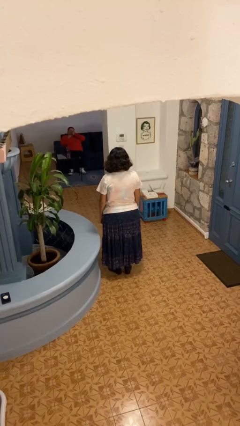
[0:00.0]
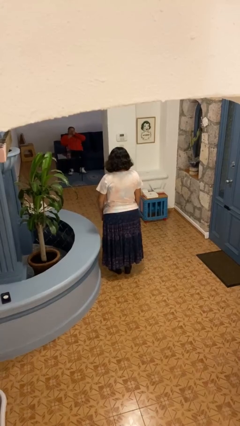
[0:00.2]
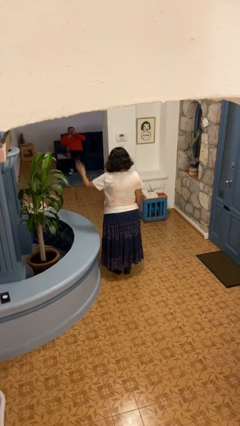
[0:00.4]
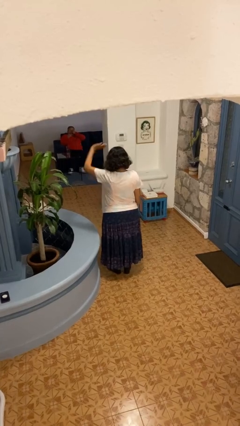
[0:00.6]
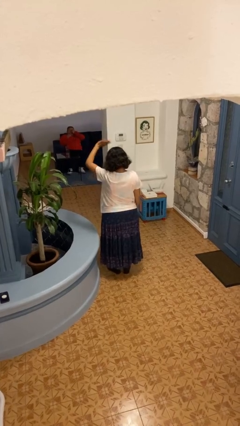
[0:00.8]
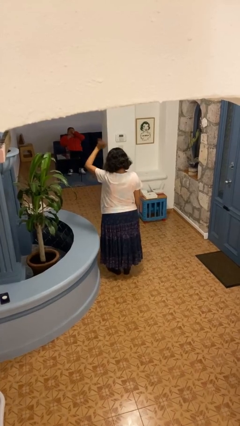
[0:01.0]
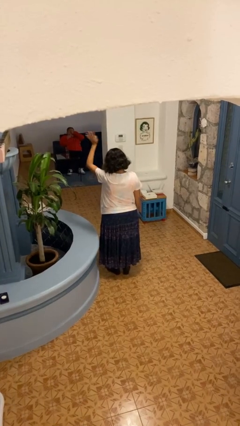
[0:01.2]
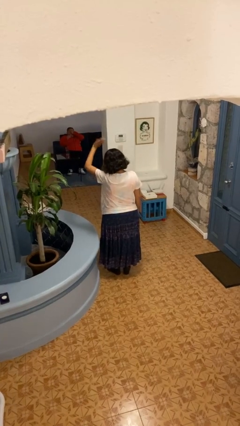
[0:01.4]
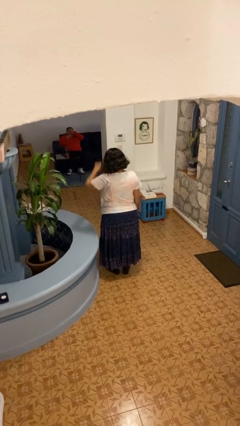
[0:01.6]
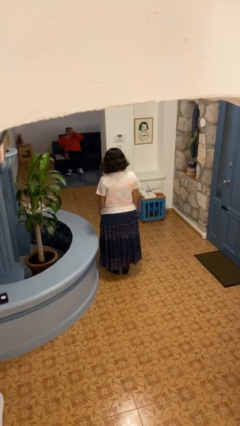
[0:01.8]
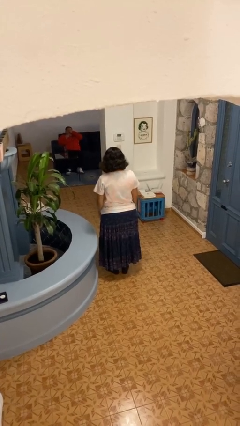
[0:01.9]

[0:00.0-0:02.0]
person waves at person

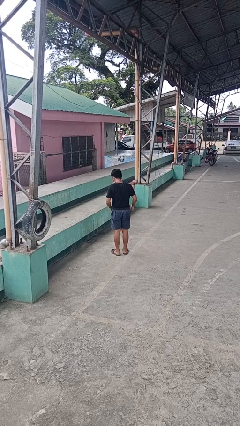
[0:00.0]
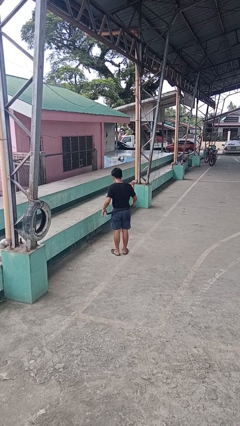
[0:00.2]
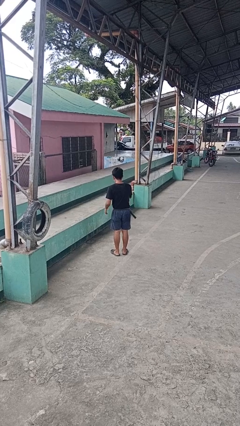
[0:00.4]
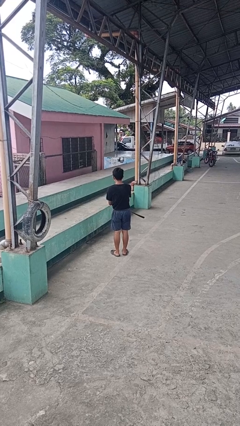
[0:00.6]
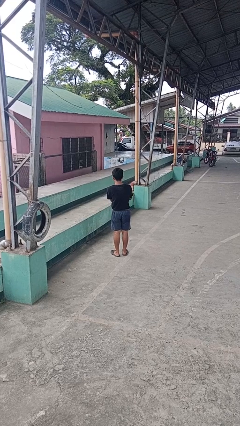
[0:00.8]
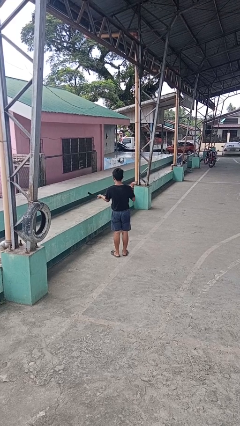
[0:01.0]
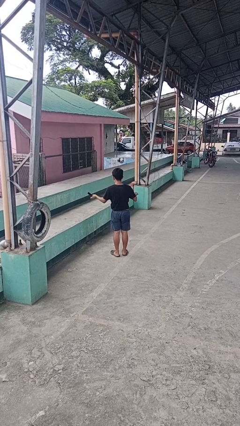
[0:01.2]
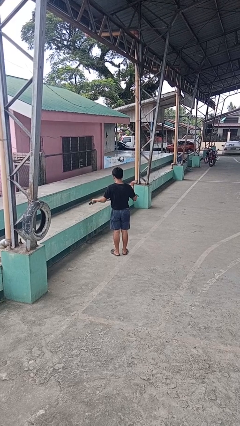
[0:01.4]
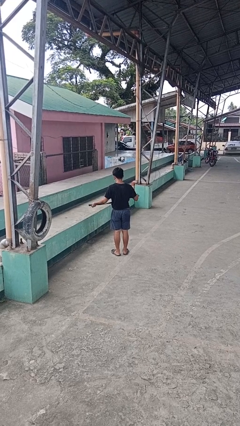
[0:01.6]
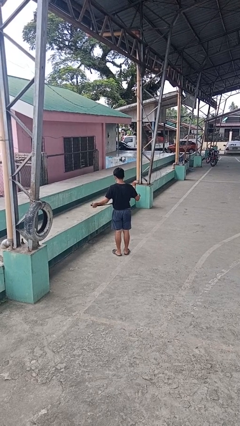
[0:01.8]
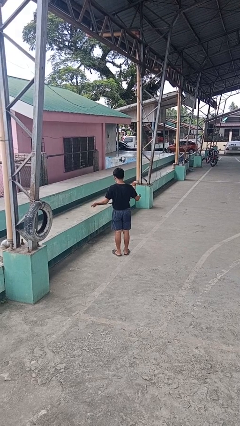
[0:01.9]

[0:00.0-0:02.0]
person takes off belt

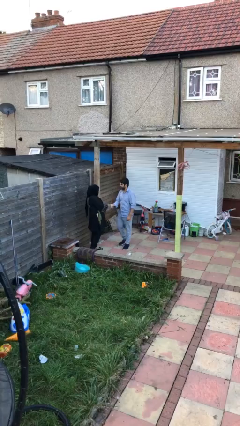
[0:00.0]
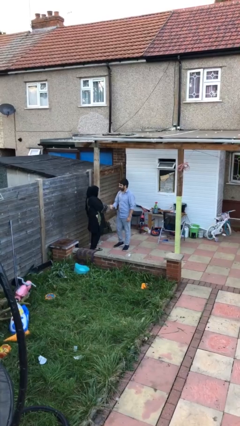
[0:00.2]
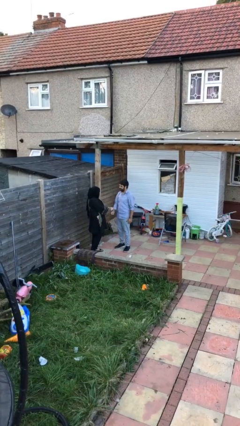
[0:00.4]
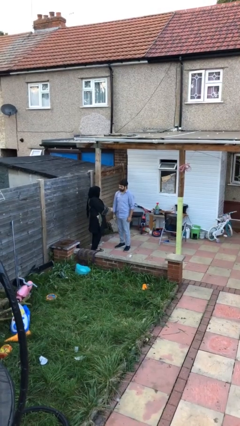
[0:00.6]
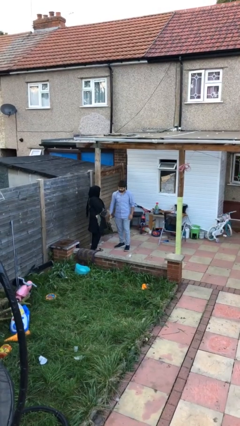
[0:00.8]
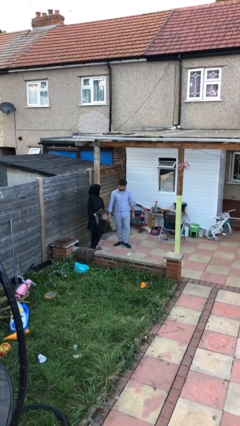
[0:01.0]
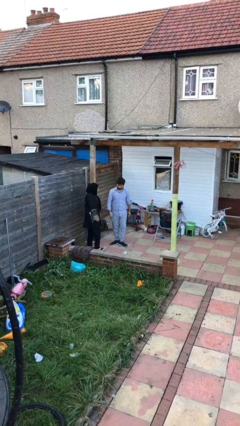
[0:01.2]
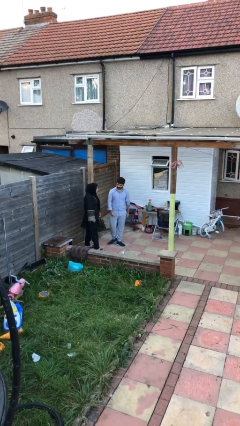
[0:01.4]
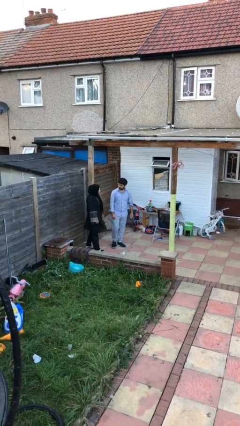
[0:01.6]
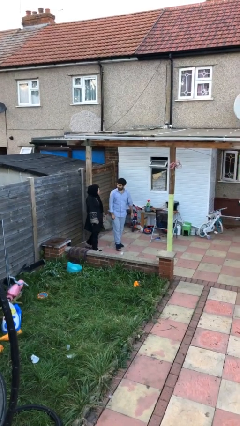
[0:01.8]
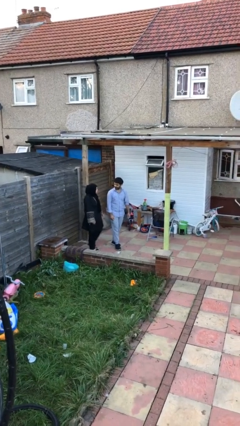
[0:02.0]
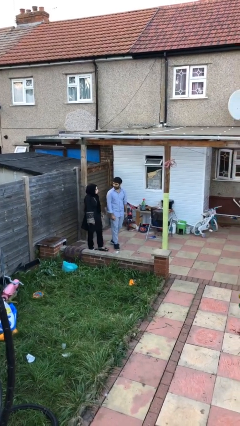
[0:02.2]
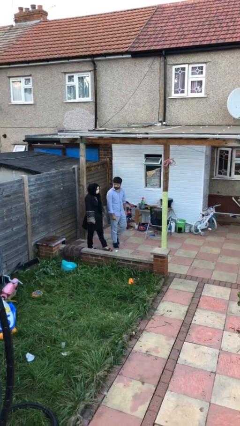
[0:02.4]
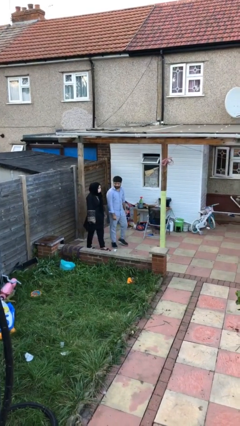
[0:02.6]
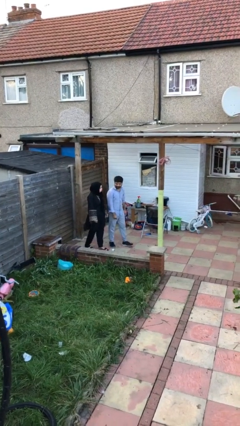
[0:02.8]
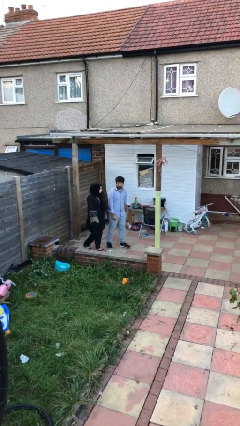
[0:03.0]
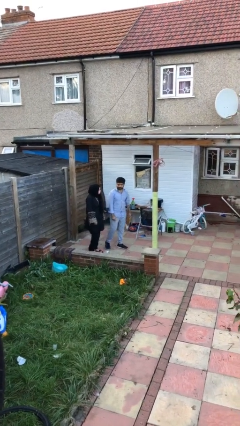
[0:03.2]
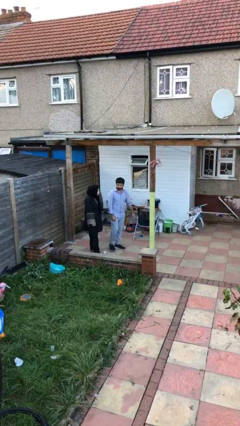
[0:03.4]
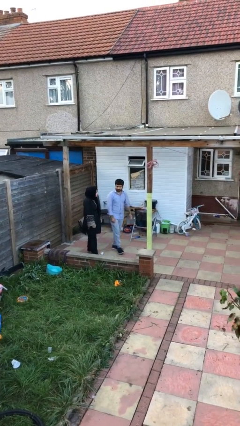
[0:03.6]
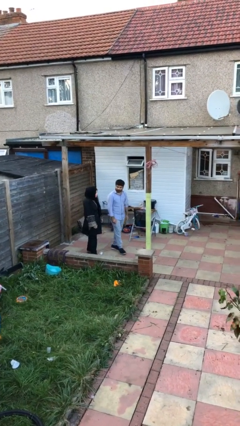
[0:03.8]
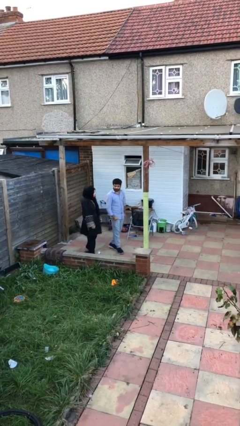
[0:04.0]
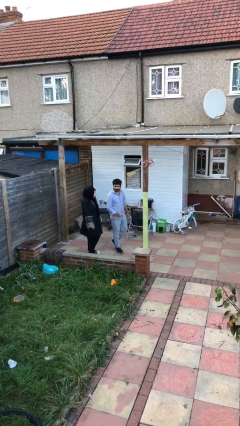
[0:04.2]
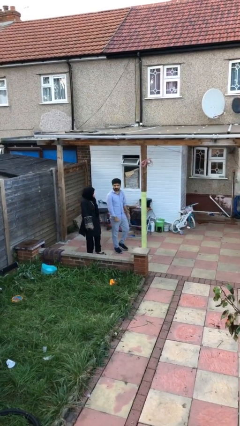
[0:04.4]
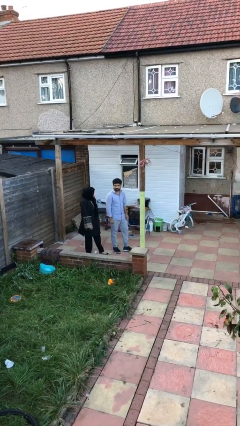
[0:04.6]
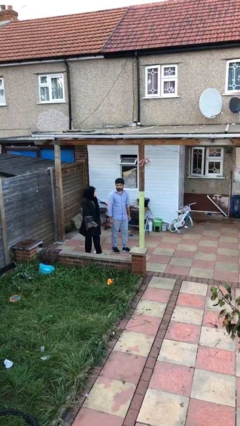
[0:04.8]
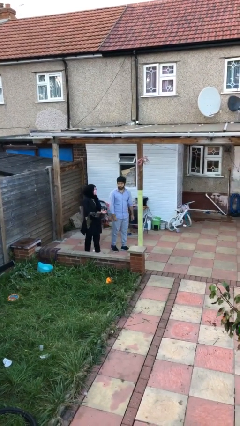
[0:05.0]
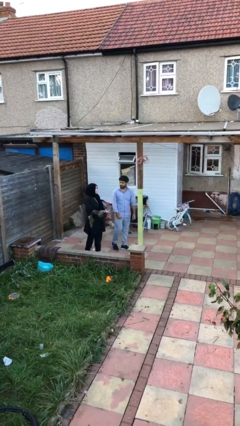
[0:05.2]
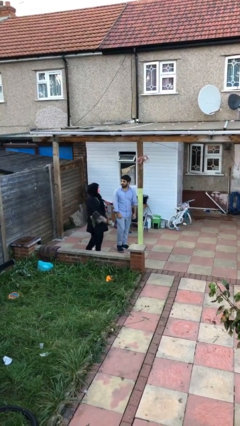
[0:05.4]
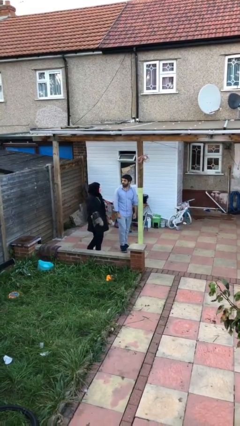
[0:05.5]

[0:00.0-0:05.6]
person talks to person

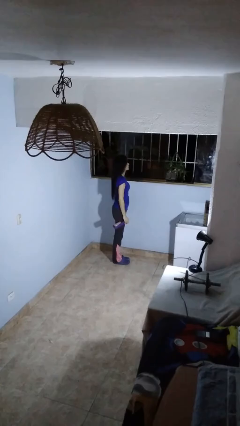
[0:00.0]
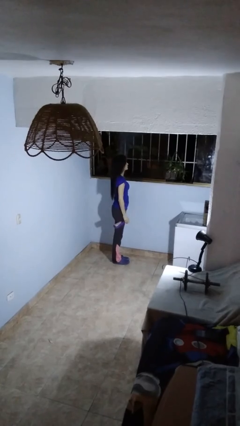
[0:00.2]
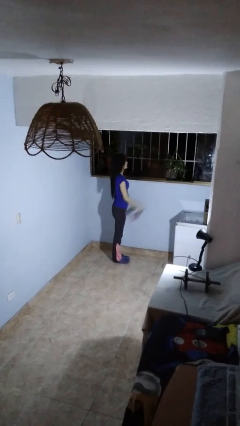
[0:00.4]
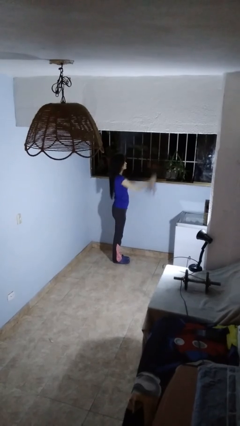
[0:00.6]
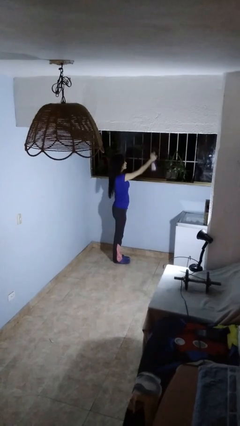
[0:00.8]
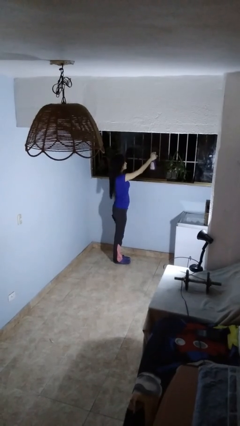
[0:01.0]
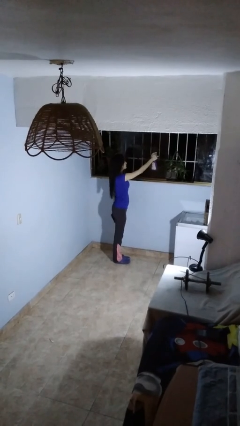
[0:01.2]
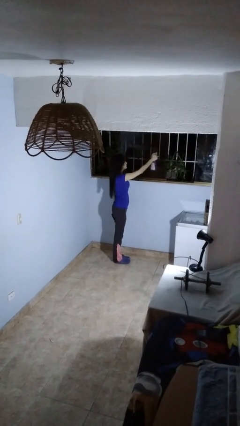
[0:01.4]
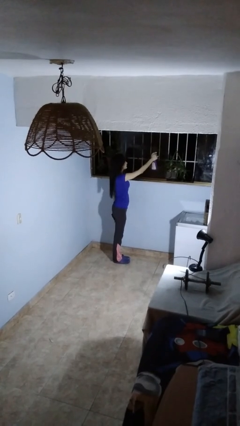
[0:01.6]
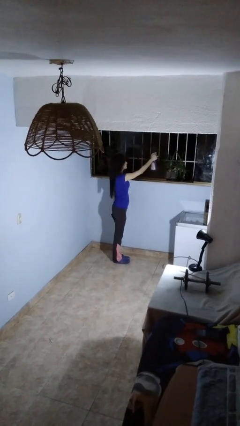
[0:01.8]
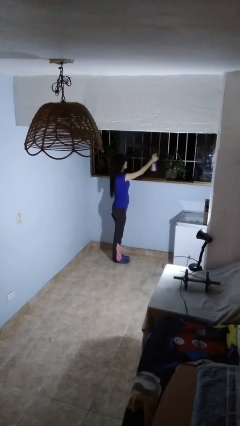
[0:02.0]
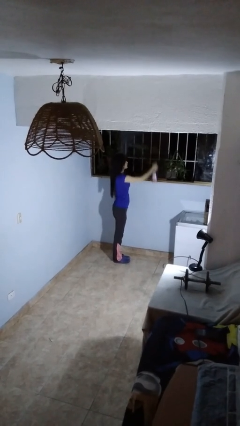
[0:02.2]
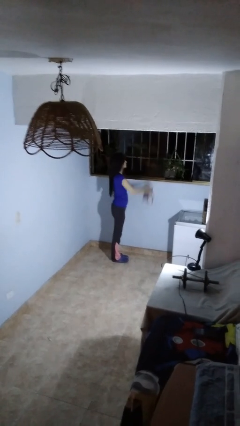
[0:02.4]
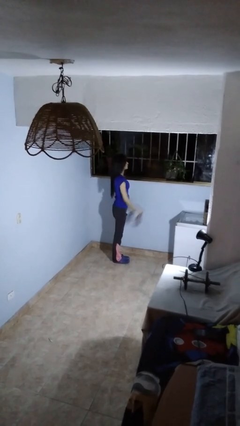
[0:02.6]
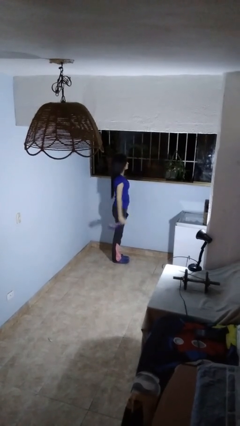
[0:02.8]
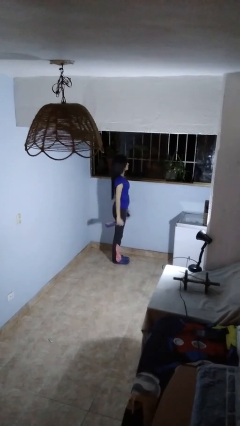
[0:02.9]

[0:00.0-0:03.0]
person sprays from bottle

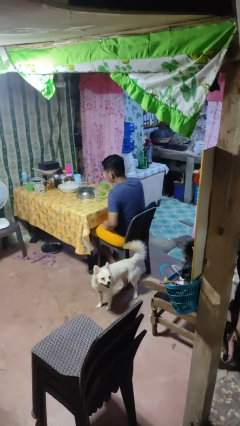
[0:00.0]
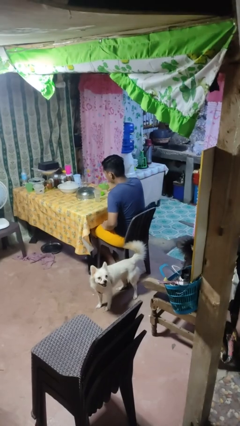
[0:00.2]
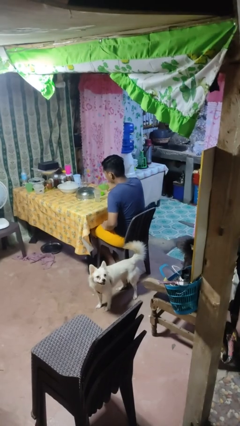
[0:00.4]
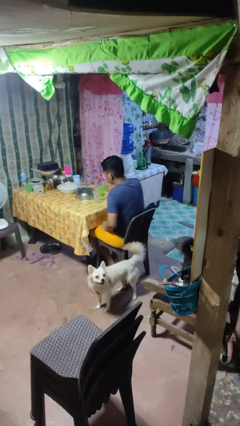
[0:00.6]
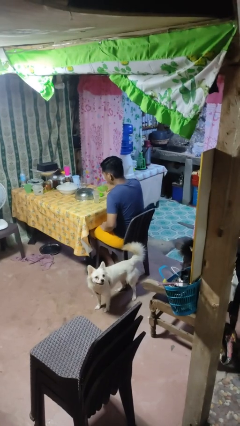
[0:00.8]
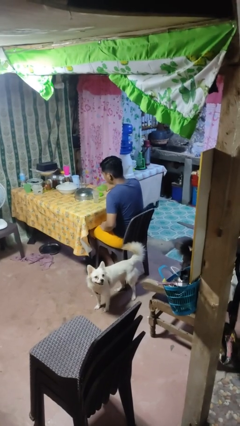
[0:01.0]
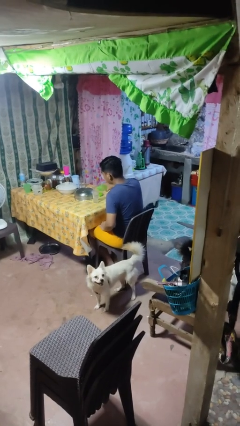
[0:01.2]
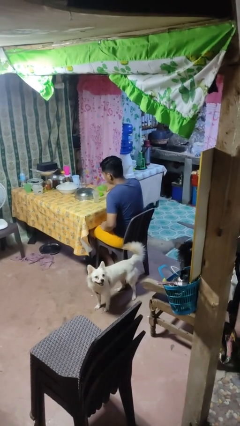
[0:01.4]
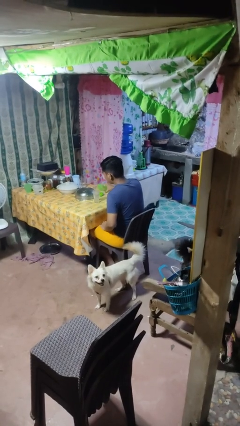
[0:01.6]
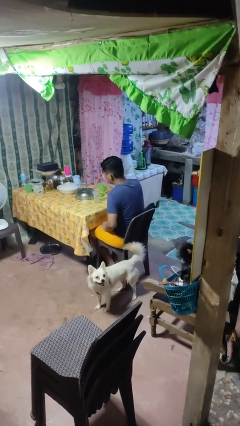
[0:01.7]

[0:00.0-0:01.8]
person pours liquid into cup

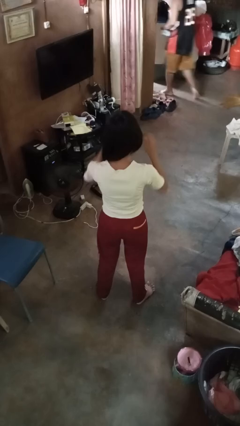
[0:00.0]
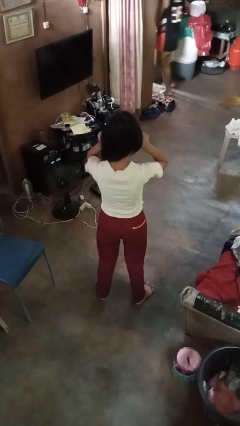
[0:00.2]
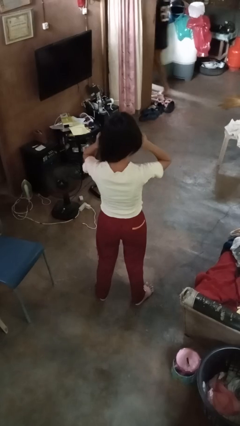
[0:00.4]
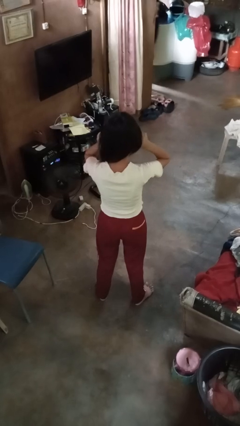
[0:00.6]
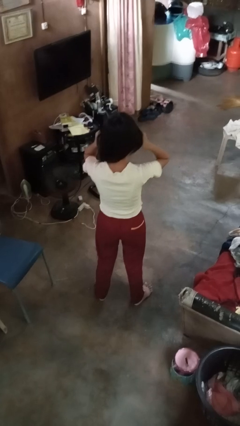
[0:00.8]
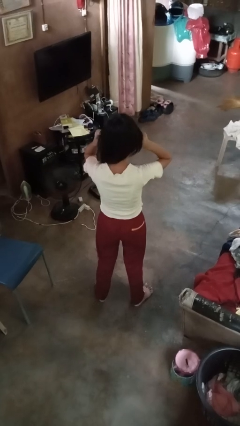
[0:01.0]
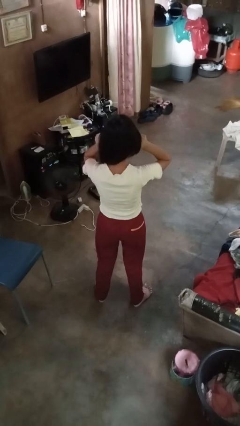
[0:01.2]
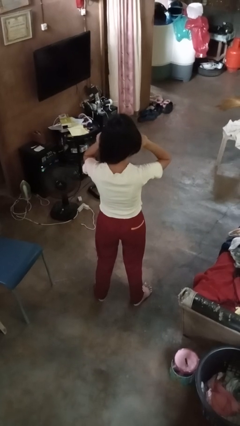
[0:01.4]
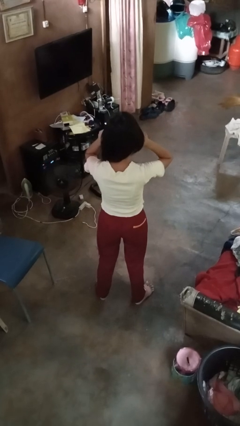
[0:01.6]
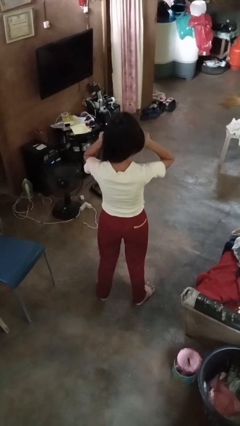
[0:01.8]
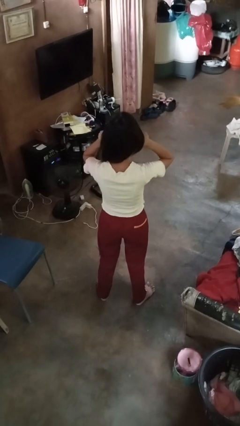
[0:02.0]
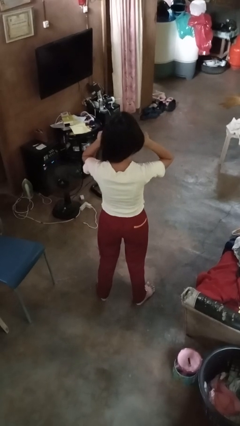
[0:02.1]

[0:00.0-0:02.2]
person touches earlobe

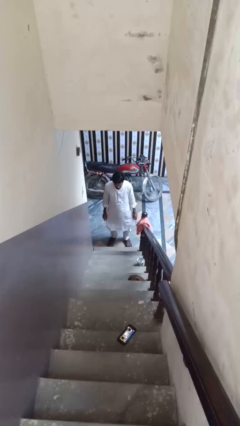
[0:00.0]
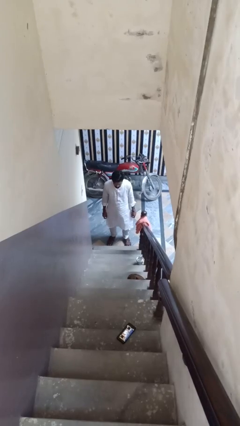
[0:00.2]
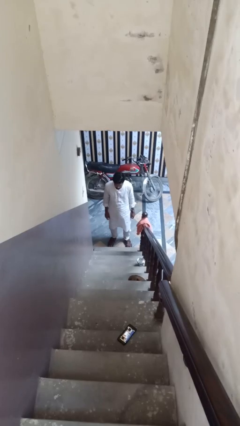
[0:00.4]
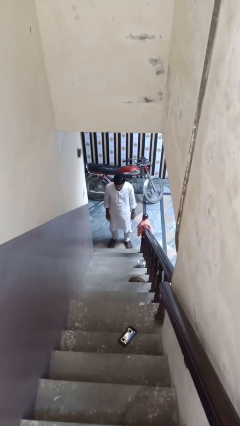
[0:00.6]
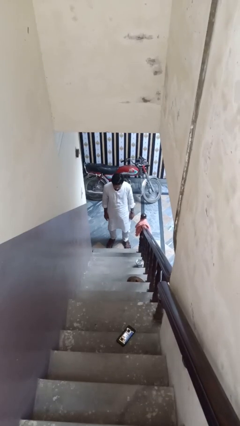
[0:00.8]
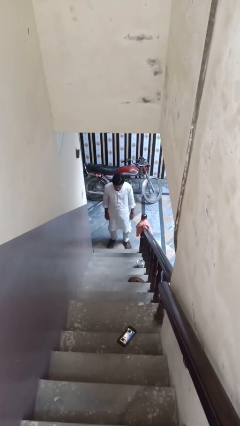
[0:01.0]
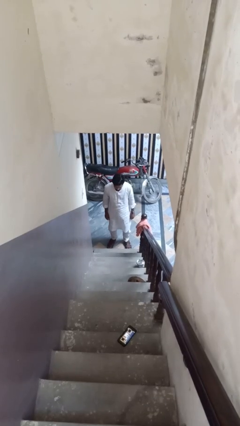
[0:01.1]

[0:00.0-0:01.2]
person climbs up ladder
